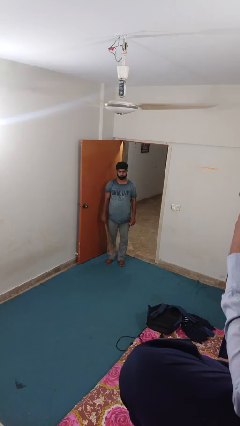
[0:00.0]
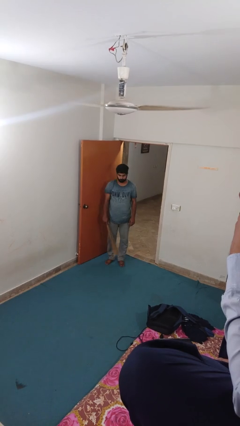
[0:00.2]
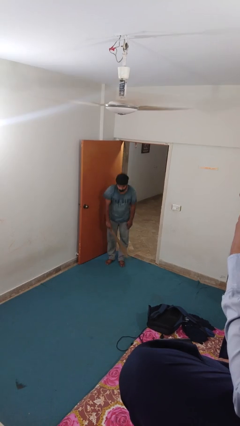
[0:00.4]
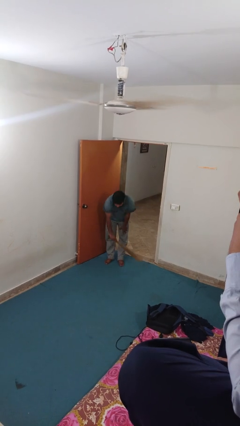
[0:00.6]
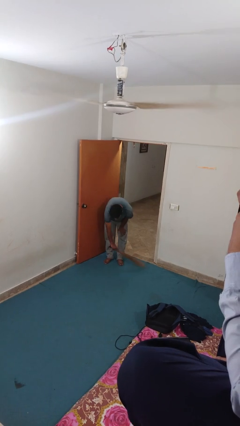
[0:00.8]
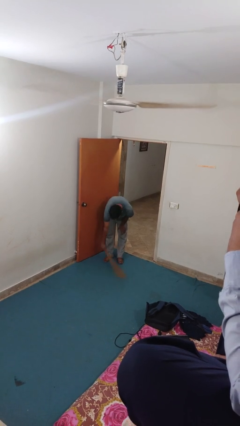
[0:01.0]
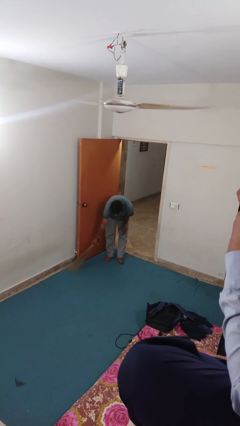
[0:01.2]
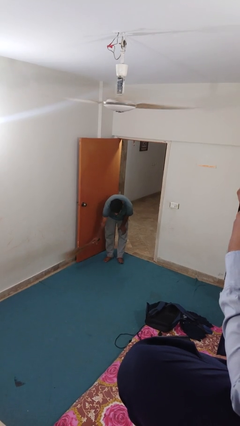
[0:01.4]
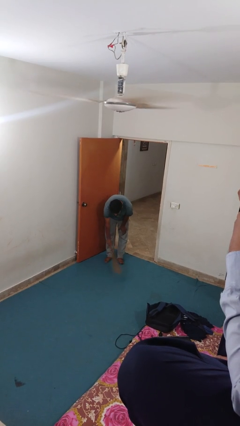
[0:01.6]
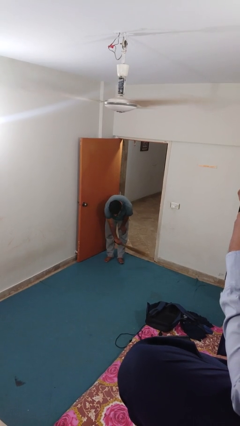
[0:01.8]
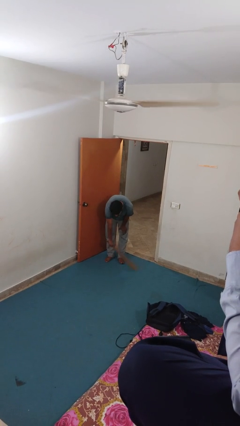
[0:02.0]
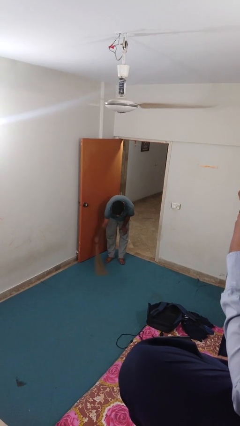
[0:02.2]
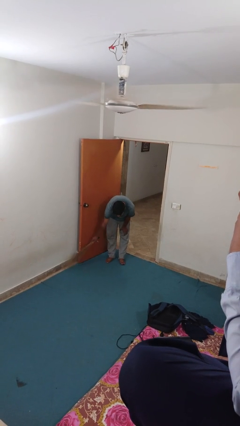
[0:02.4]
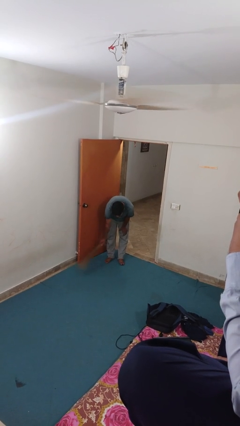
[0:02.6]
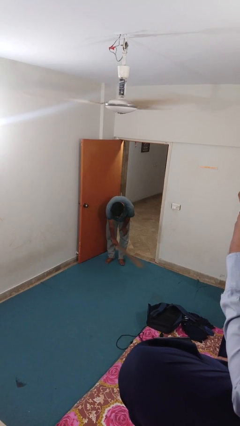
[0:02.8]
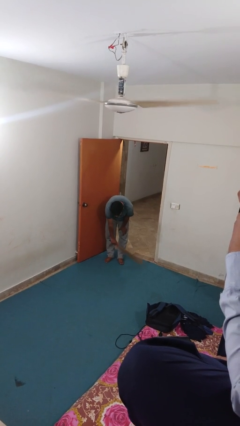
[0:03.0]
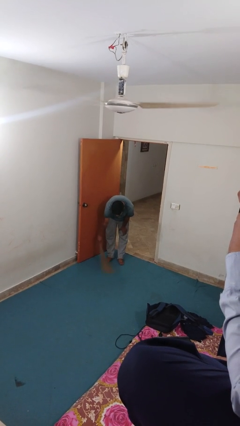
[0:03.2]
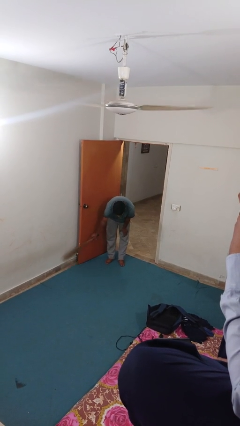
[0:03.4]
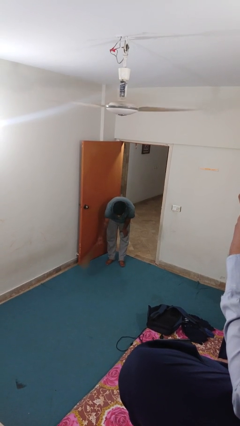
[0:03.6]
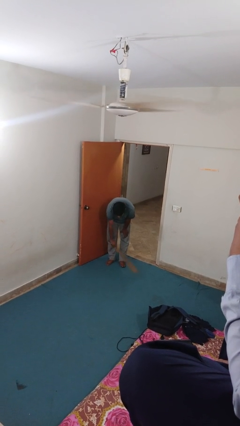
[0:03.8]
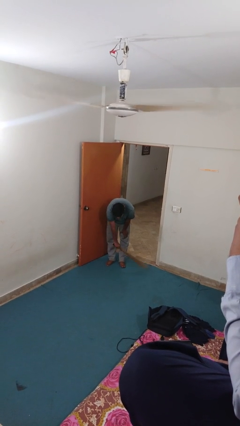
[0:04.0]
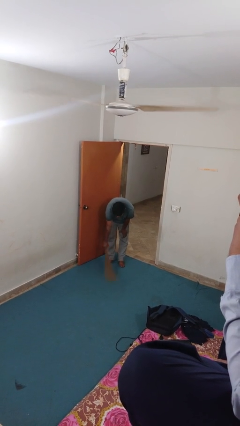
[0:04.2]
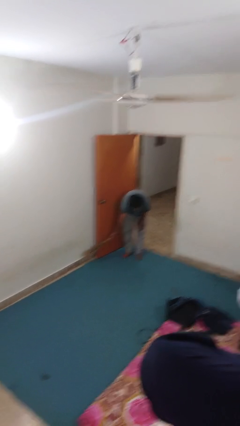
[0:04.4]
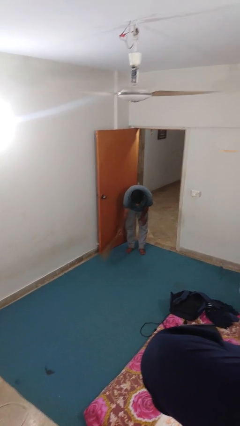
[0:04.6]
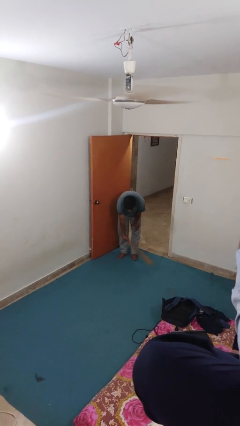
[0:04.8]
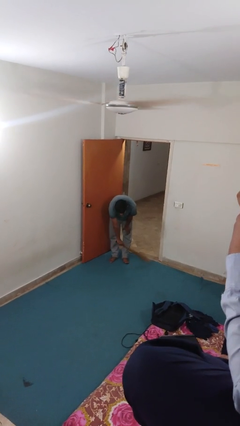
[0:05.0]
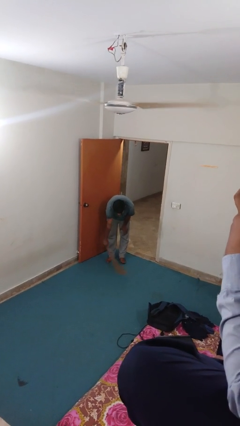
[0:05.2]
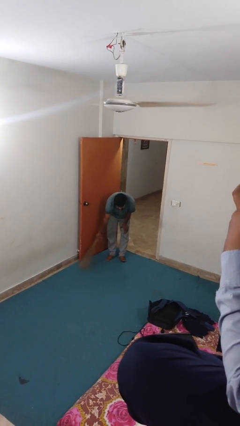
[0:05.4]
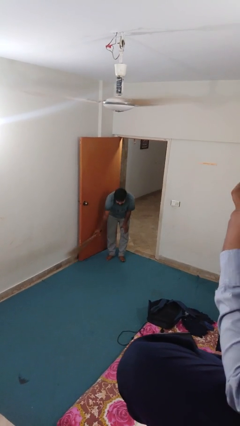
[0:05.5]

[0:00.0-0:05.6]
person sweeps floor

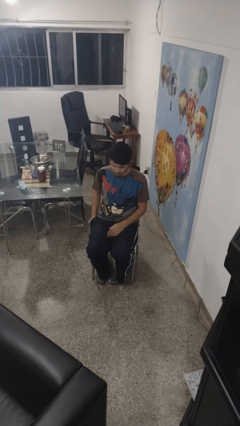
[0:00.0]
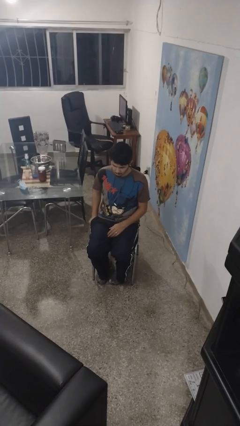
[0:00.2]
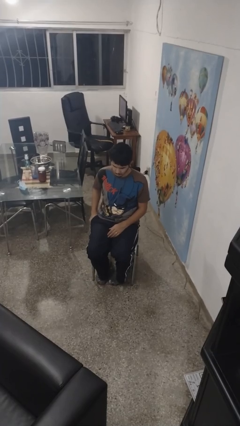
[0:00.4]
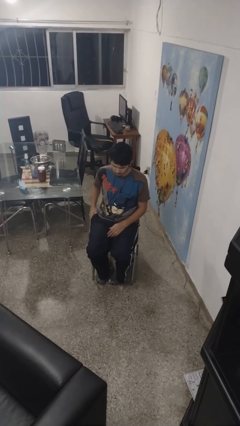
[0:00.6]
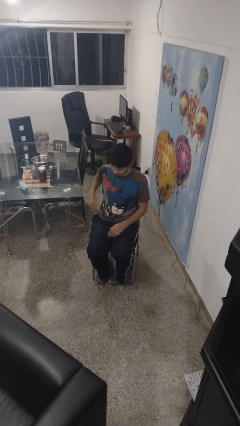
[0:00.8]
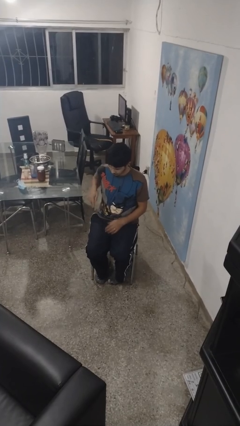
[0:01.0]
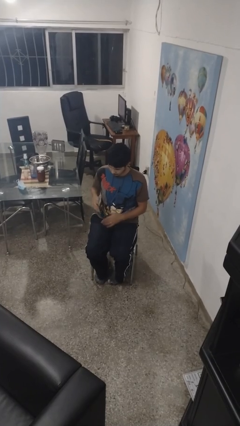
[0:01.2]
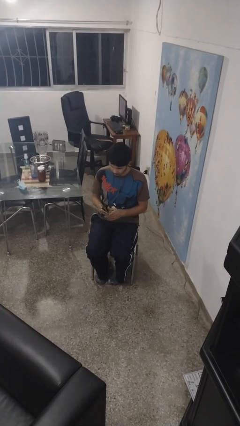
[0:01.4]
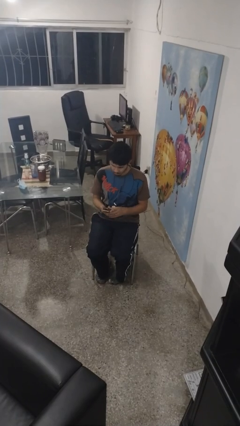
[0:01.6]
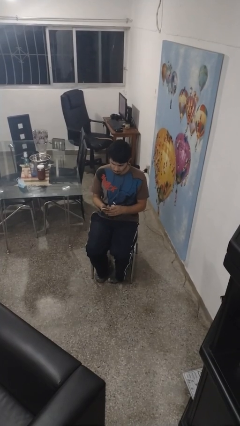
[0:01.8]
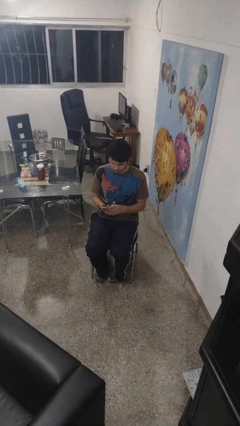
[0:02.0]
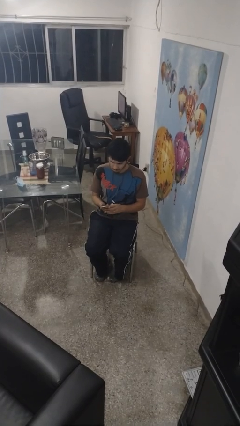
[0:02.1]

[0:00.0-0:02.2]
person takes phone from pocket

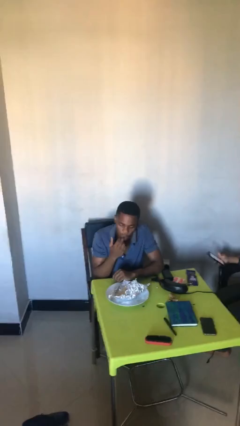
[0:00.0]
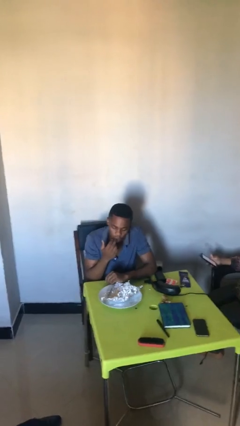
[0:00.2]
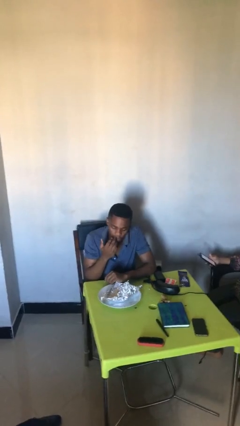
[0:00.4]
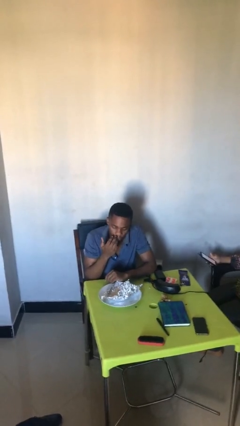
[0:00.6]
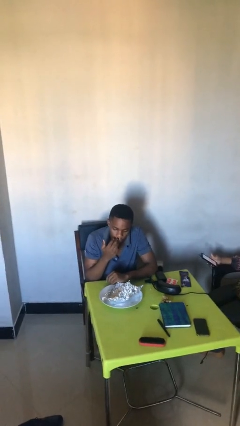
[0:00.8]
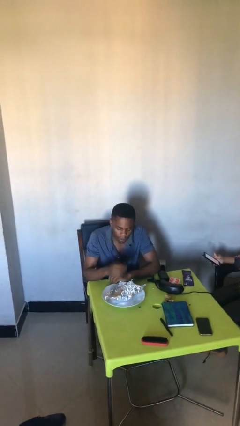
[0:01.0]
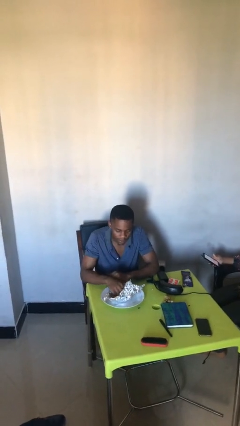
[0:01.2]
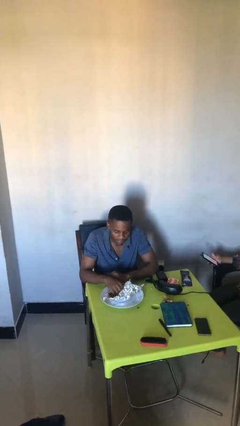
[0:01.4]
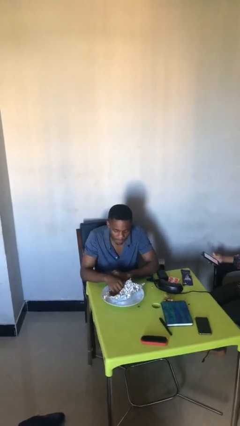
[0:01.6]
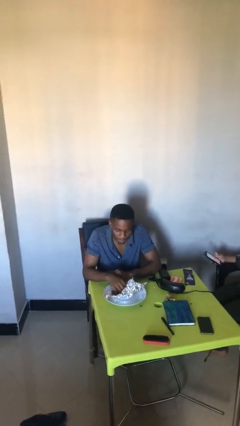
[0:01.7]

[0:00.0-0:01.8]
person licks fingers

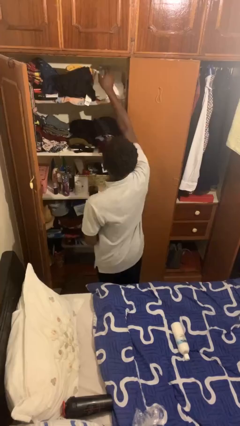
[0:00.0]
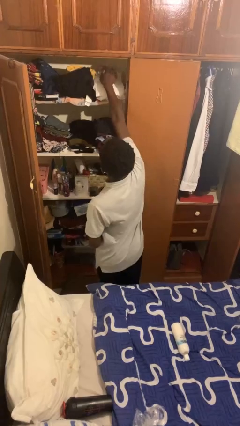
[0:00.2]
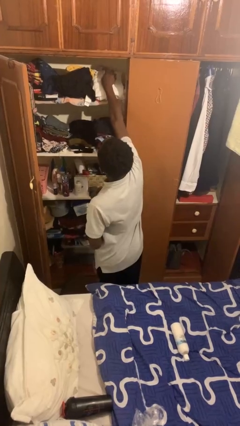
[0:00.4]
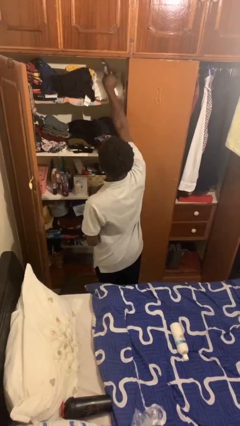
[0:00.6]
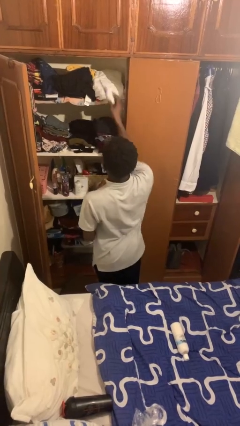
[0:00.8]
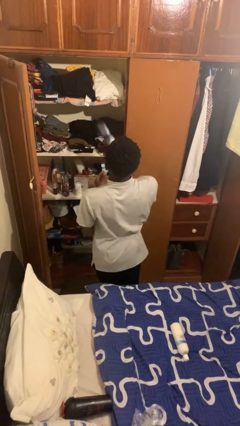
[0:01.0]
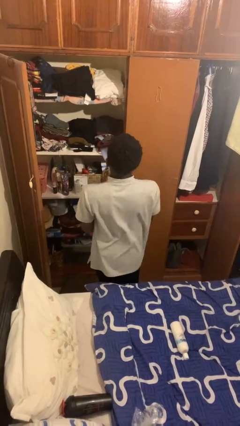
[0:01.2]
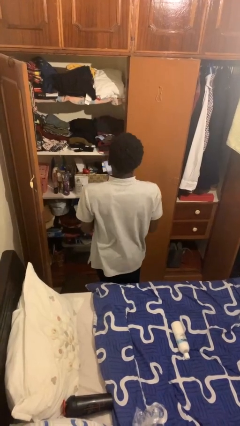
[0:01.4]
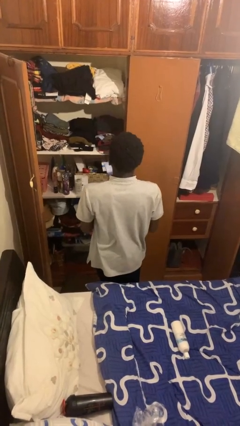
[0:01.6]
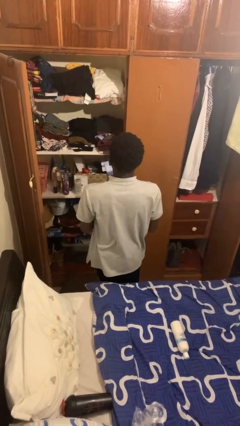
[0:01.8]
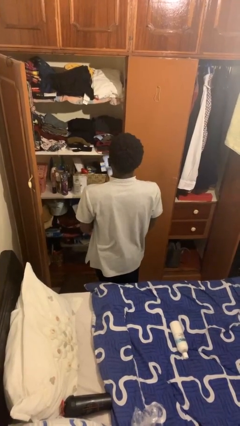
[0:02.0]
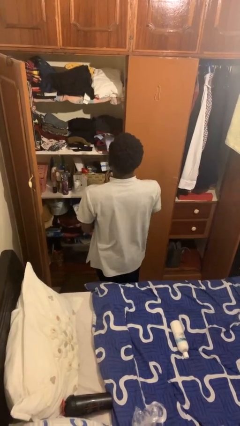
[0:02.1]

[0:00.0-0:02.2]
person picks up object from shelf

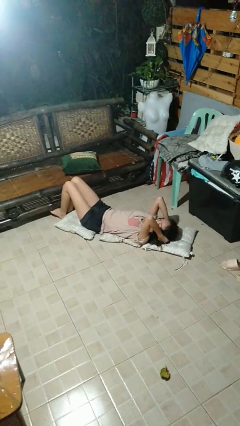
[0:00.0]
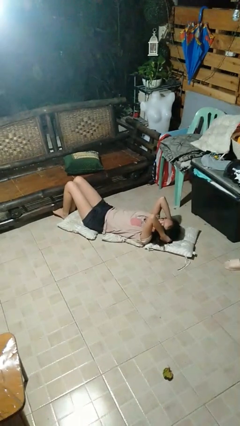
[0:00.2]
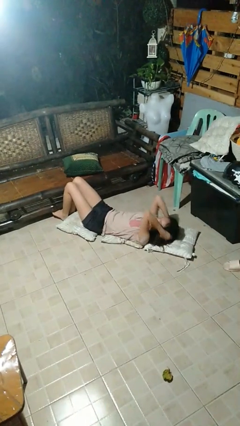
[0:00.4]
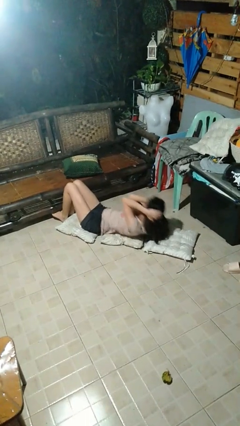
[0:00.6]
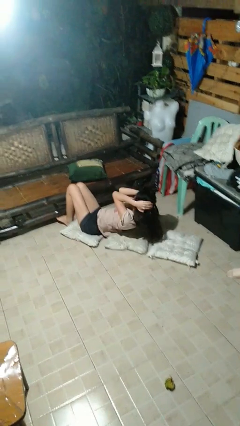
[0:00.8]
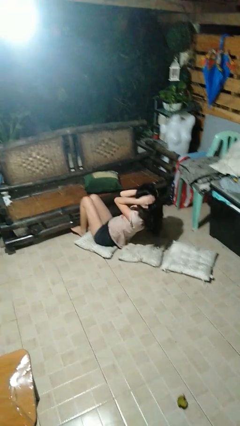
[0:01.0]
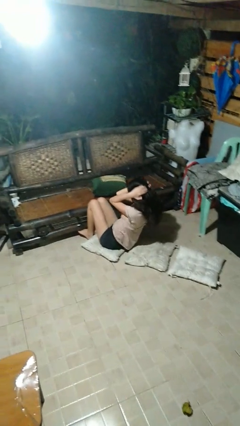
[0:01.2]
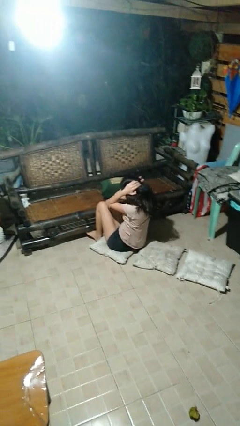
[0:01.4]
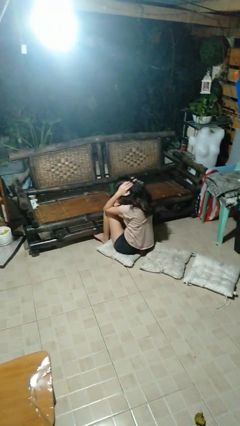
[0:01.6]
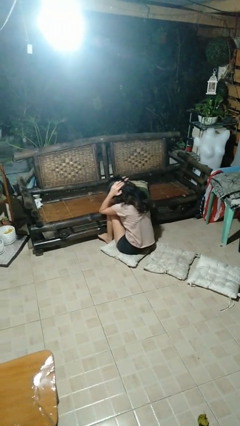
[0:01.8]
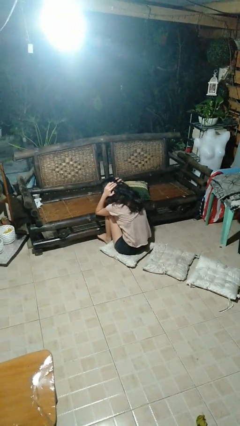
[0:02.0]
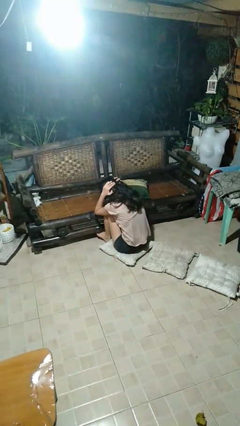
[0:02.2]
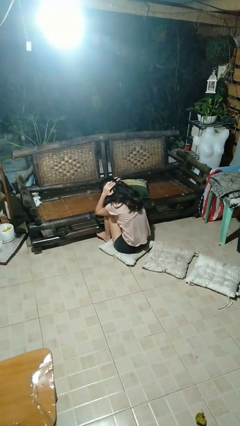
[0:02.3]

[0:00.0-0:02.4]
person exercises with situp

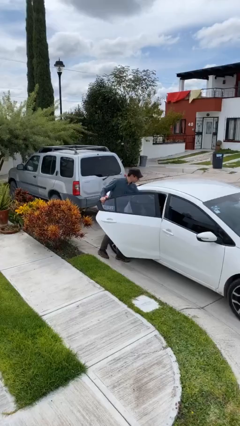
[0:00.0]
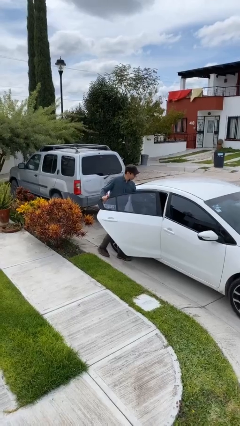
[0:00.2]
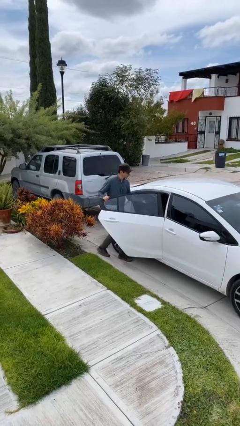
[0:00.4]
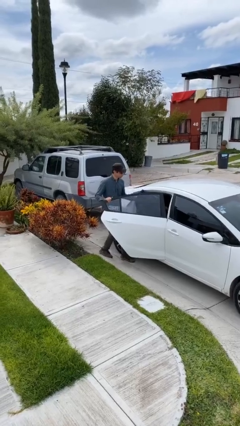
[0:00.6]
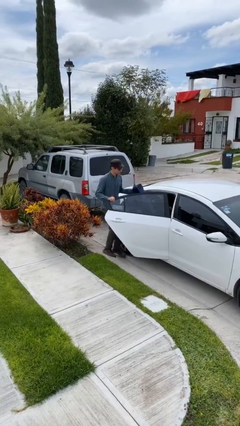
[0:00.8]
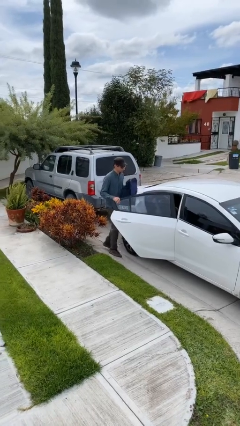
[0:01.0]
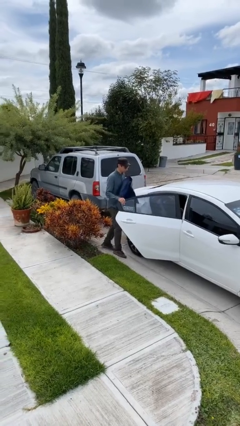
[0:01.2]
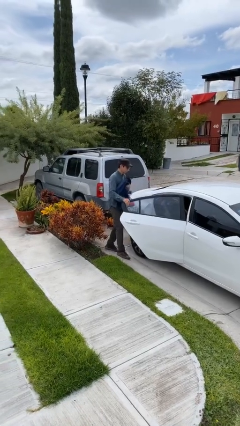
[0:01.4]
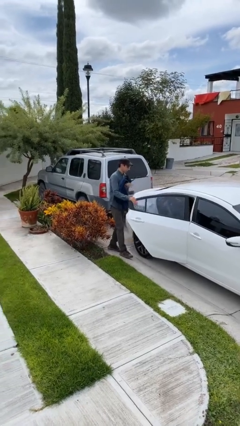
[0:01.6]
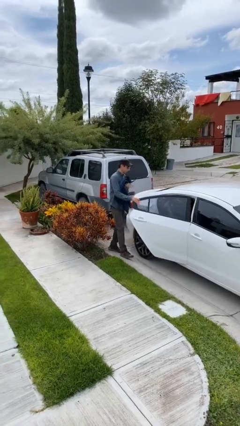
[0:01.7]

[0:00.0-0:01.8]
person unloads car

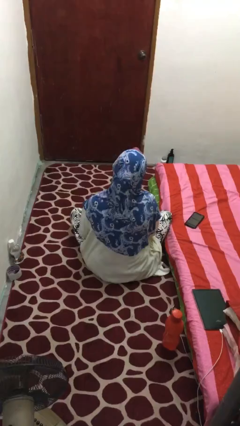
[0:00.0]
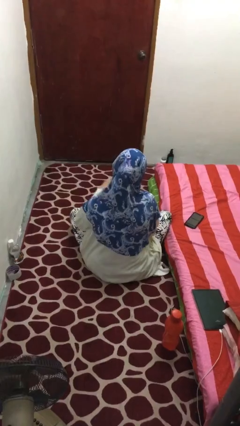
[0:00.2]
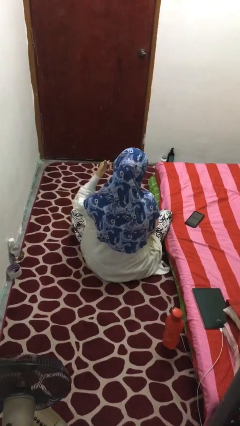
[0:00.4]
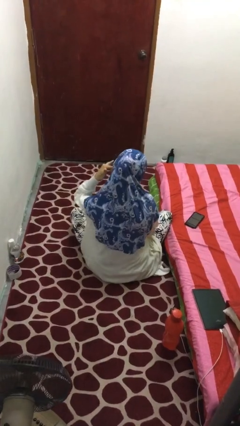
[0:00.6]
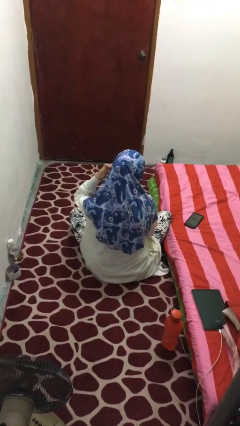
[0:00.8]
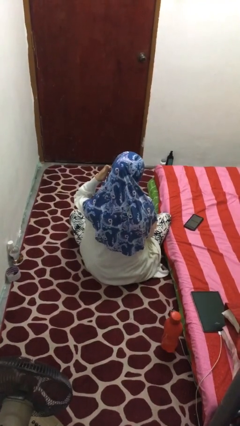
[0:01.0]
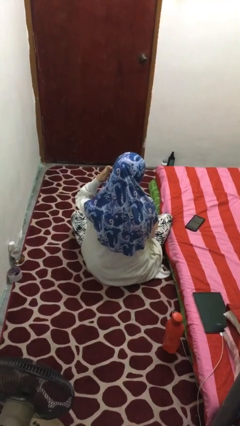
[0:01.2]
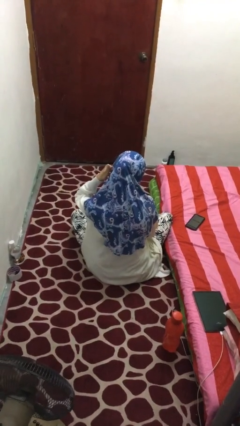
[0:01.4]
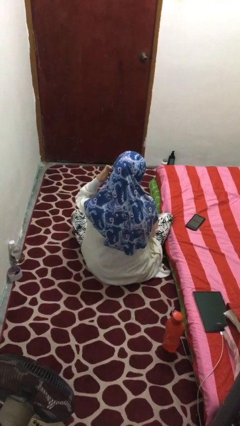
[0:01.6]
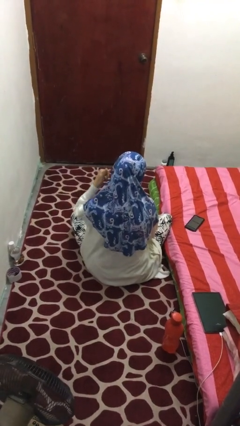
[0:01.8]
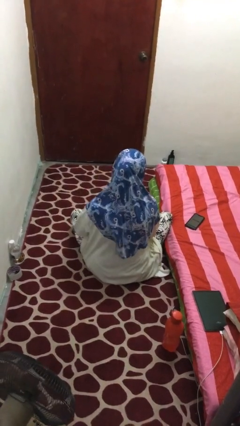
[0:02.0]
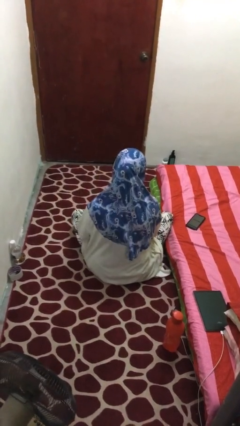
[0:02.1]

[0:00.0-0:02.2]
person gestures call me
